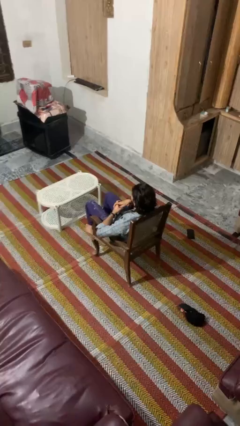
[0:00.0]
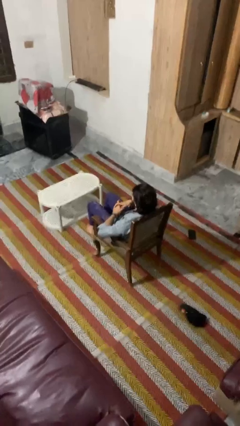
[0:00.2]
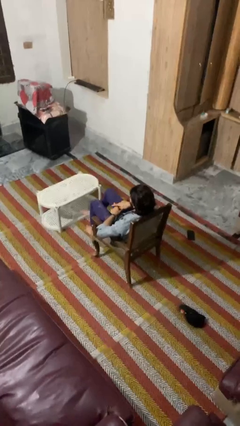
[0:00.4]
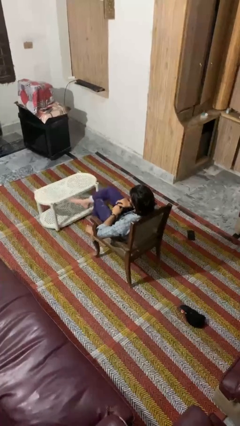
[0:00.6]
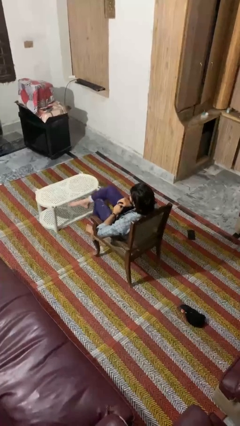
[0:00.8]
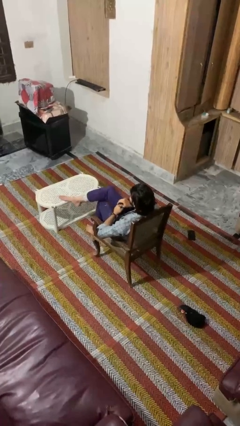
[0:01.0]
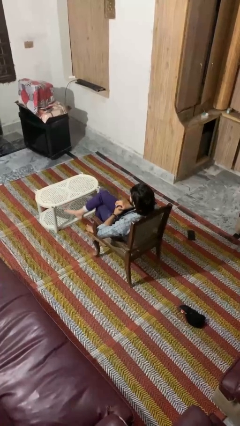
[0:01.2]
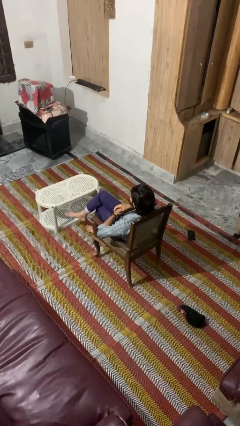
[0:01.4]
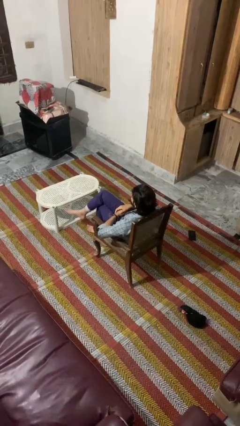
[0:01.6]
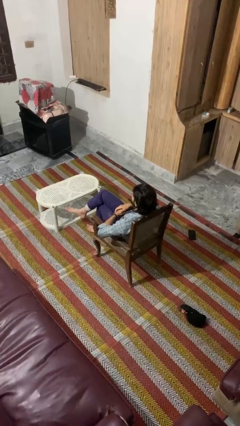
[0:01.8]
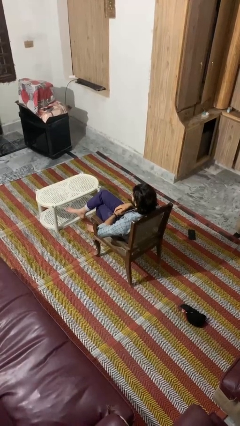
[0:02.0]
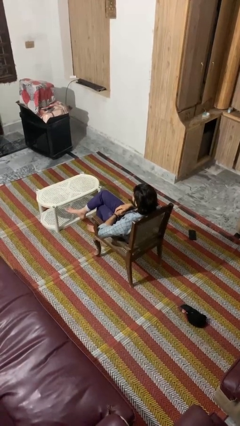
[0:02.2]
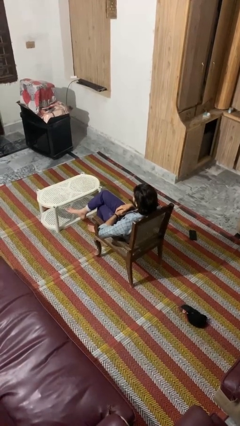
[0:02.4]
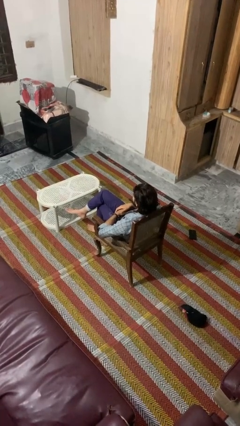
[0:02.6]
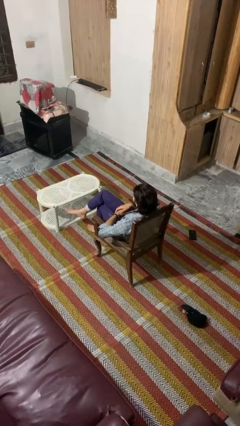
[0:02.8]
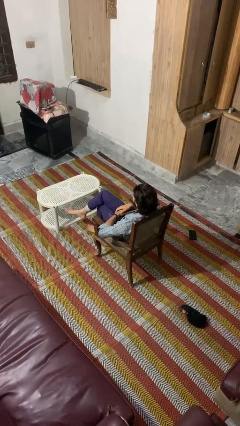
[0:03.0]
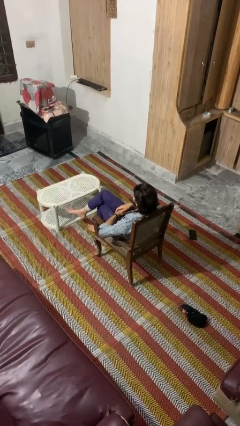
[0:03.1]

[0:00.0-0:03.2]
person crosses legs

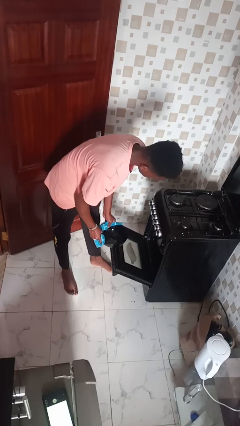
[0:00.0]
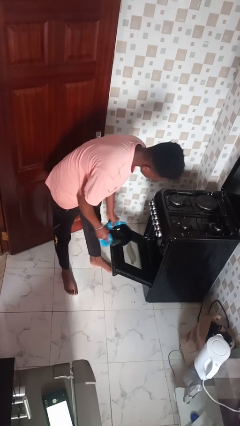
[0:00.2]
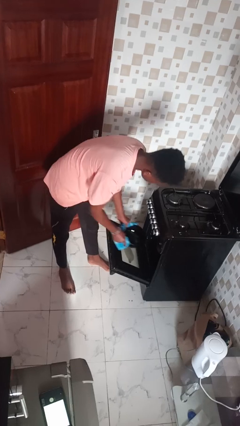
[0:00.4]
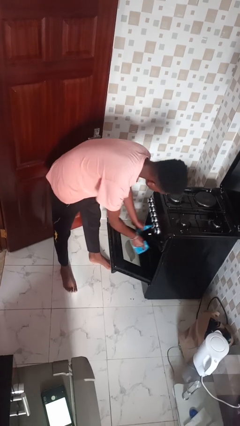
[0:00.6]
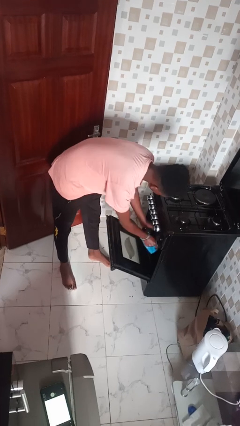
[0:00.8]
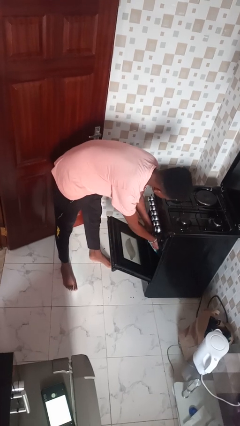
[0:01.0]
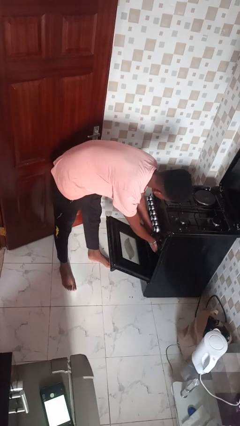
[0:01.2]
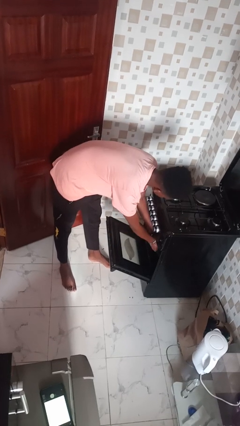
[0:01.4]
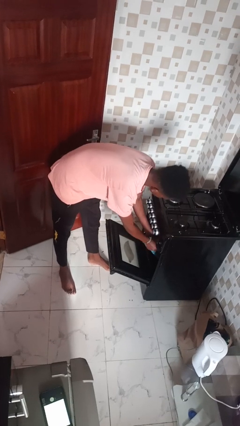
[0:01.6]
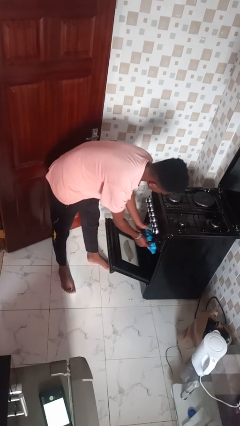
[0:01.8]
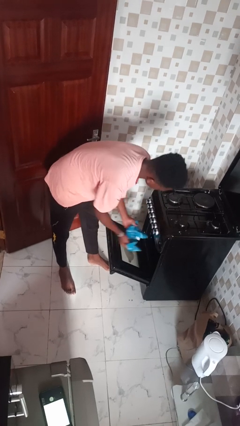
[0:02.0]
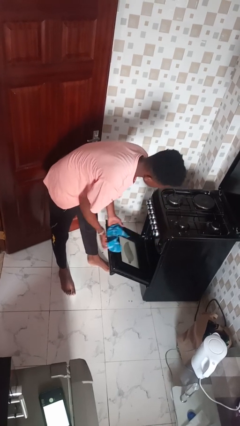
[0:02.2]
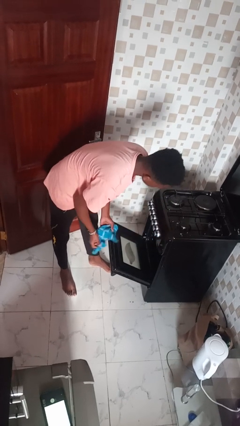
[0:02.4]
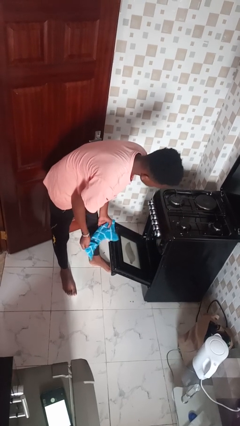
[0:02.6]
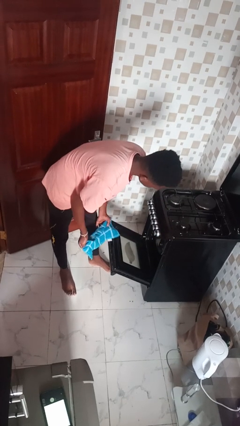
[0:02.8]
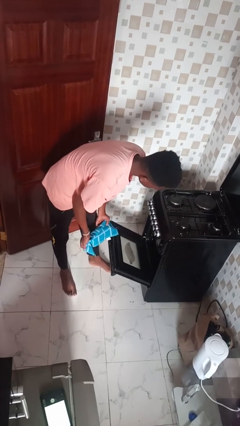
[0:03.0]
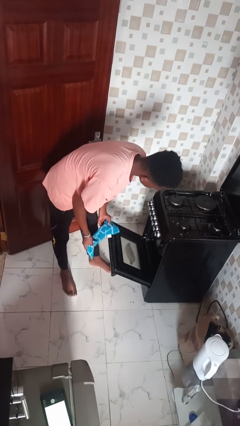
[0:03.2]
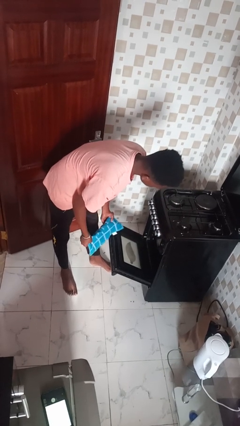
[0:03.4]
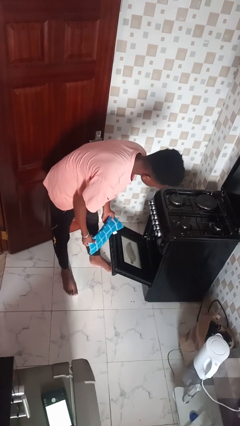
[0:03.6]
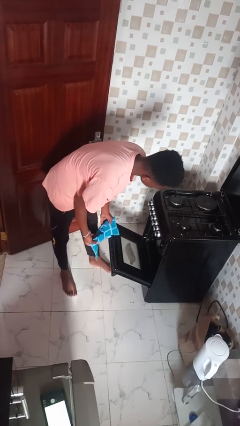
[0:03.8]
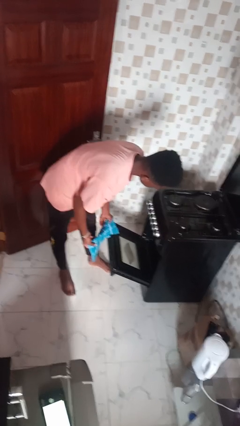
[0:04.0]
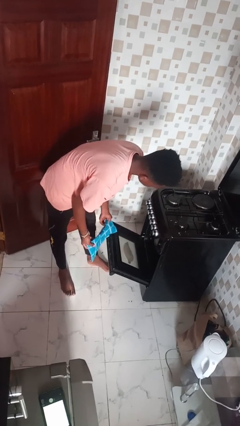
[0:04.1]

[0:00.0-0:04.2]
person puts object into oven

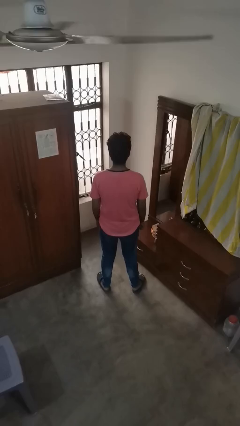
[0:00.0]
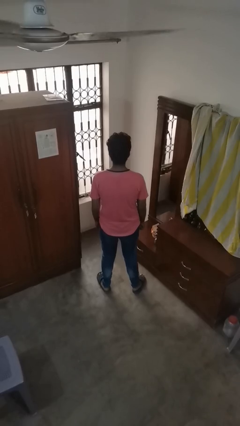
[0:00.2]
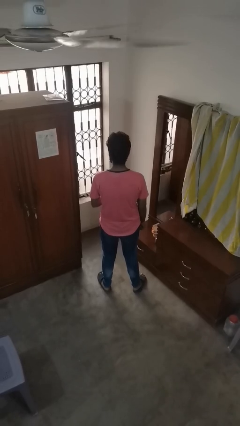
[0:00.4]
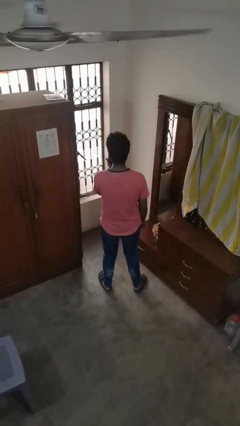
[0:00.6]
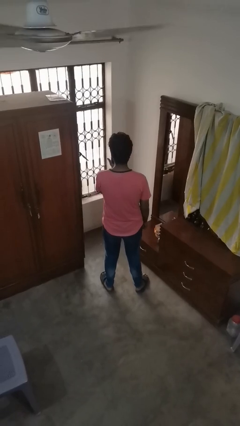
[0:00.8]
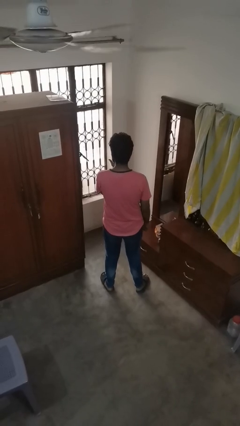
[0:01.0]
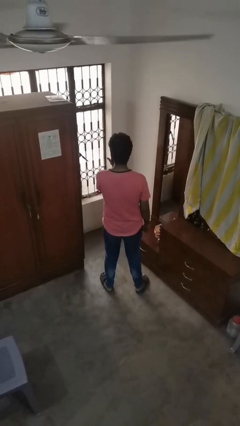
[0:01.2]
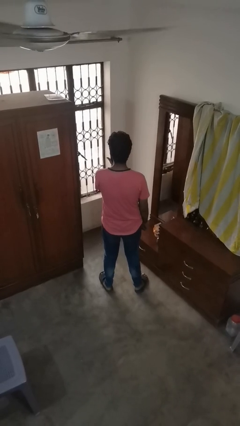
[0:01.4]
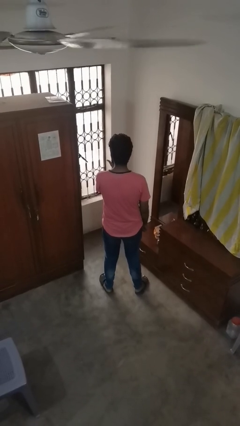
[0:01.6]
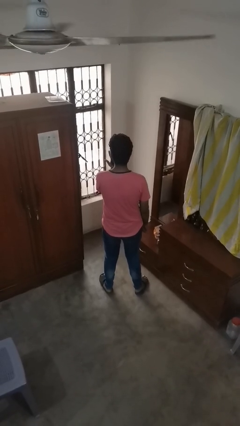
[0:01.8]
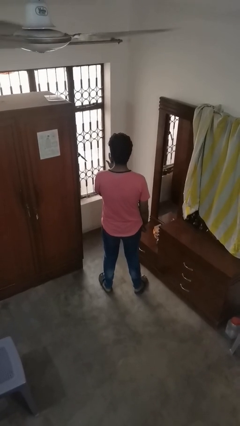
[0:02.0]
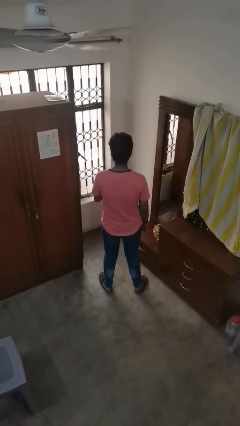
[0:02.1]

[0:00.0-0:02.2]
person licks fingers

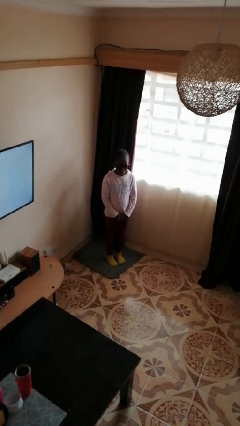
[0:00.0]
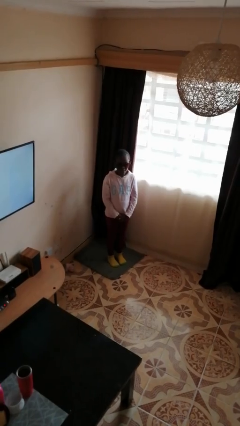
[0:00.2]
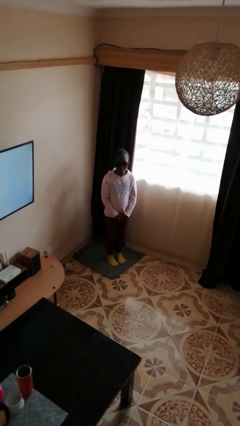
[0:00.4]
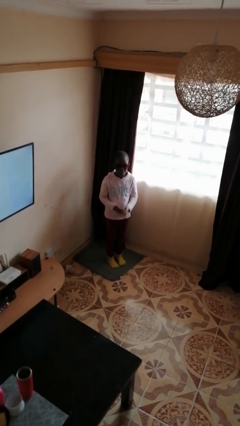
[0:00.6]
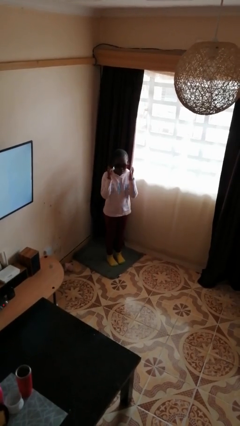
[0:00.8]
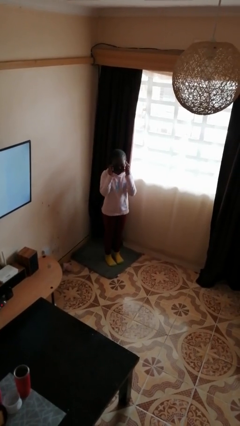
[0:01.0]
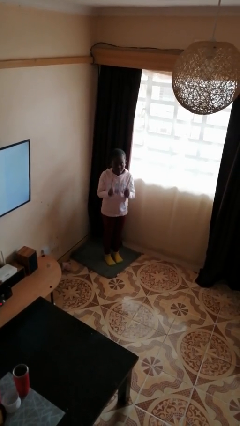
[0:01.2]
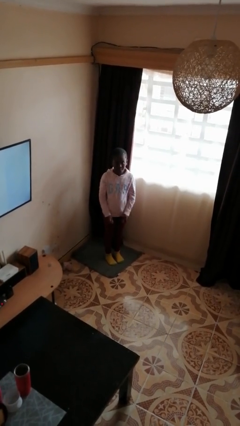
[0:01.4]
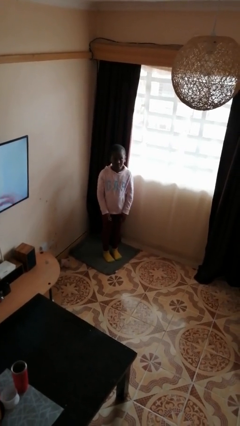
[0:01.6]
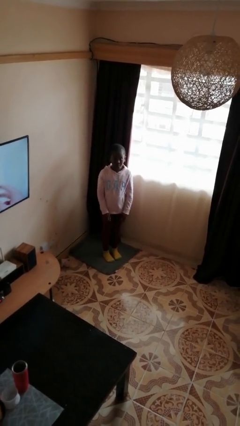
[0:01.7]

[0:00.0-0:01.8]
person takes off sunglasses

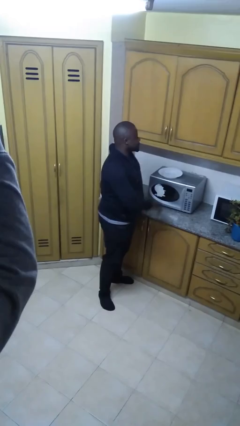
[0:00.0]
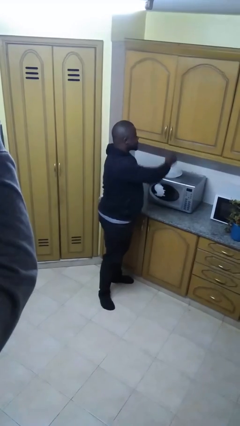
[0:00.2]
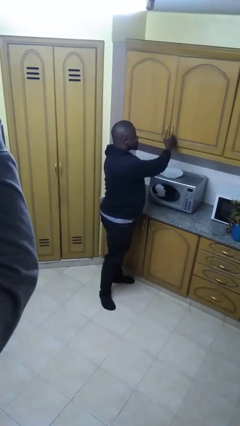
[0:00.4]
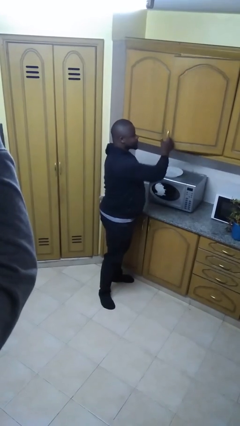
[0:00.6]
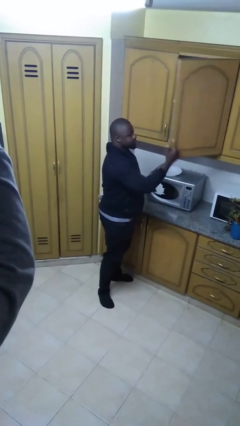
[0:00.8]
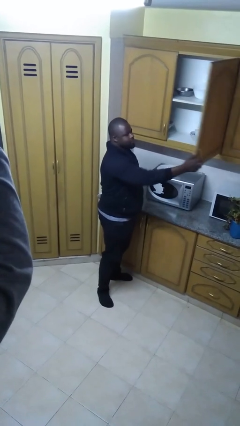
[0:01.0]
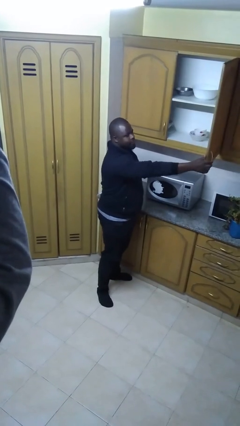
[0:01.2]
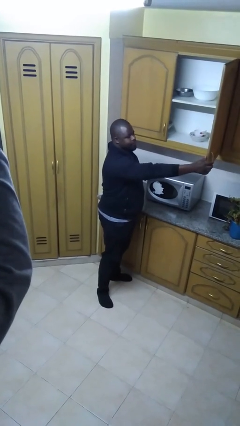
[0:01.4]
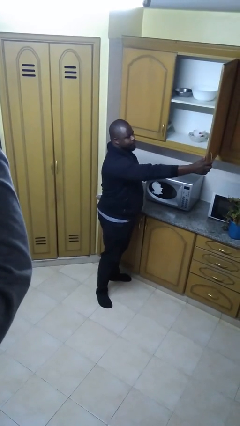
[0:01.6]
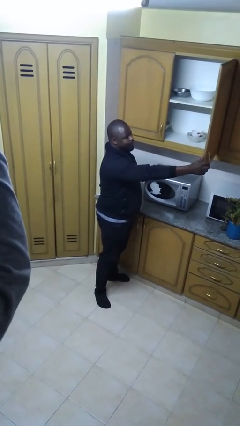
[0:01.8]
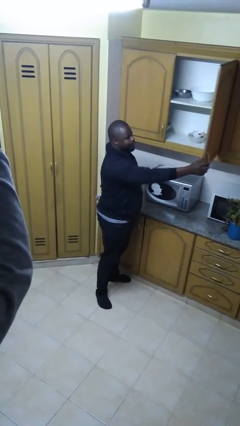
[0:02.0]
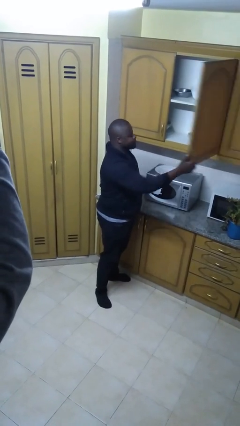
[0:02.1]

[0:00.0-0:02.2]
person opens cabinet

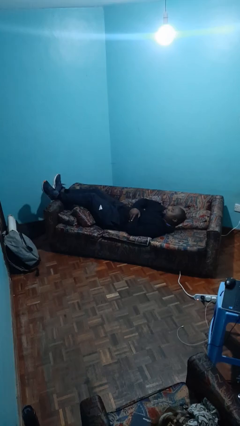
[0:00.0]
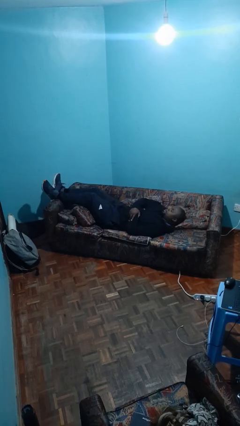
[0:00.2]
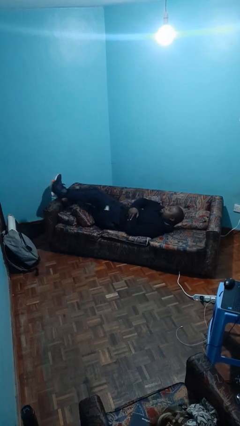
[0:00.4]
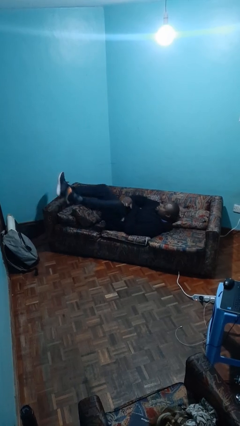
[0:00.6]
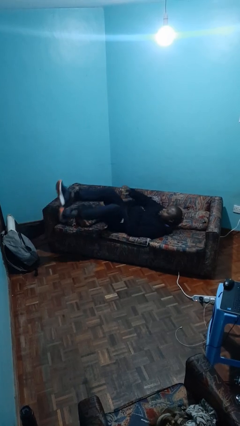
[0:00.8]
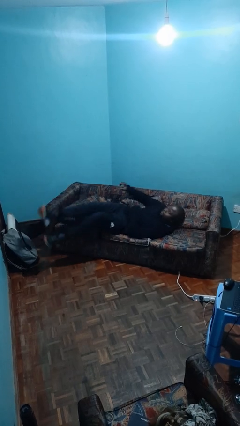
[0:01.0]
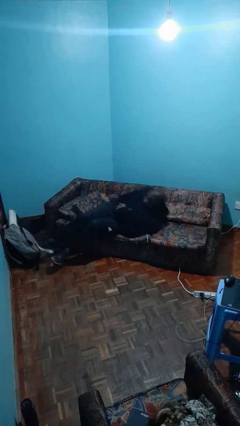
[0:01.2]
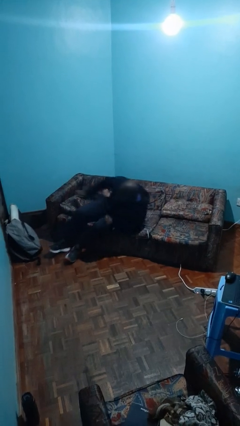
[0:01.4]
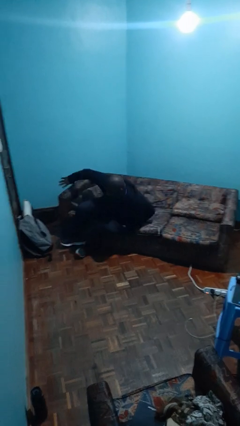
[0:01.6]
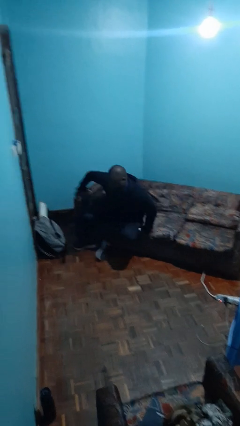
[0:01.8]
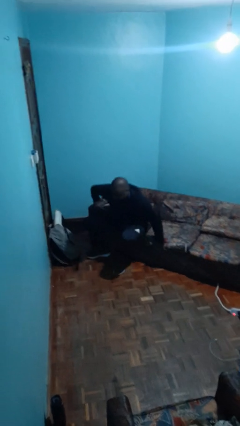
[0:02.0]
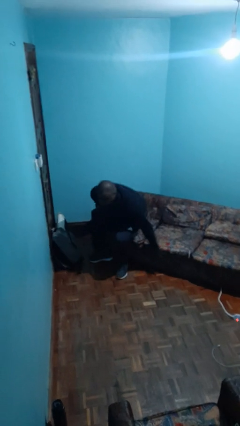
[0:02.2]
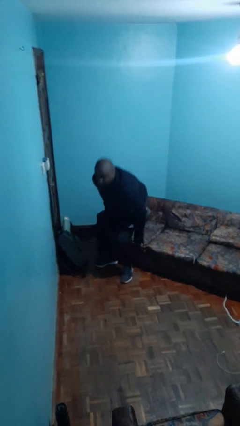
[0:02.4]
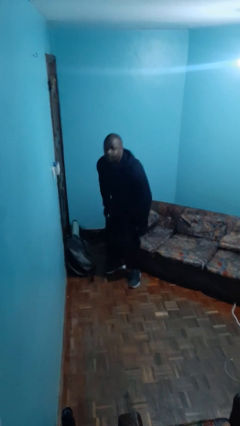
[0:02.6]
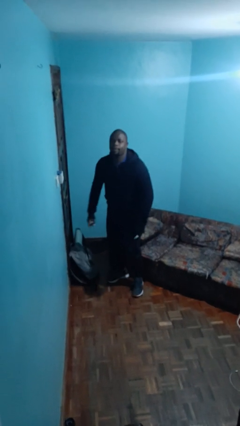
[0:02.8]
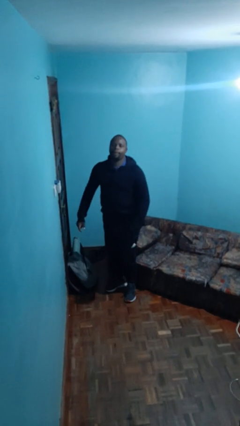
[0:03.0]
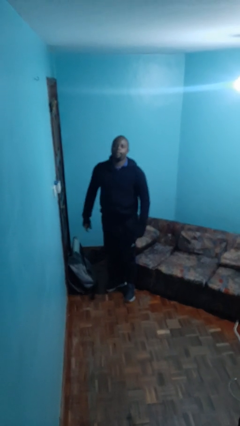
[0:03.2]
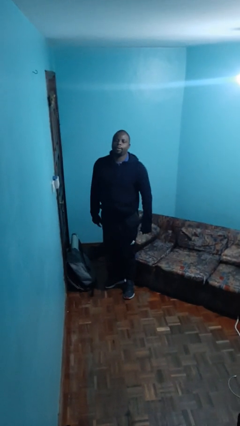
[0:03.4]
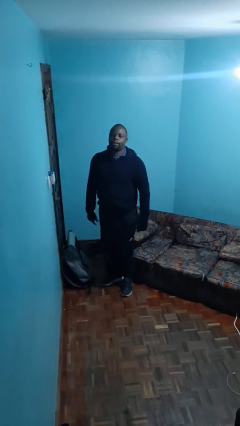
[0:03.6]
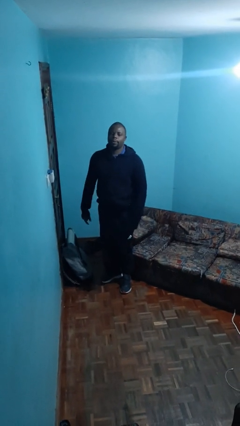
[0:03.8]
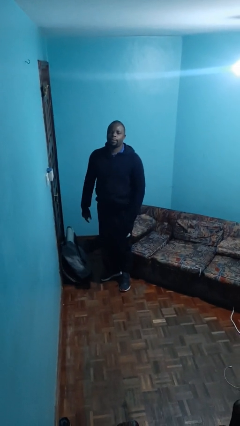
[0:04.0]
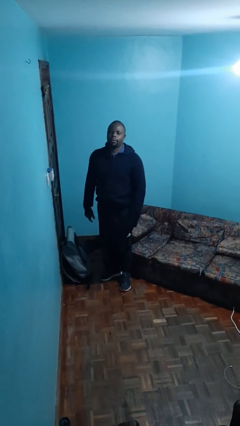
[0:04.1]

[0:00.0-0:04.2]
person stands up
